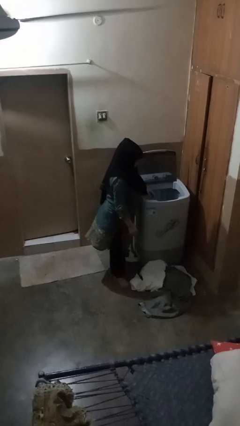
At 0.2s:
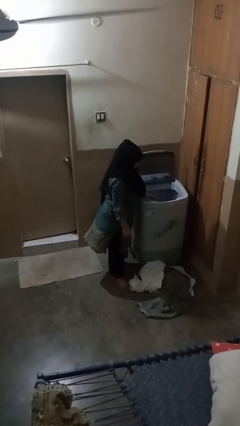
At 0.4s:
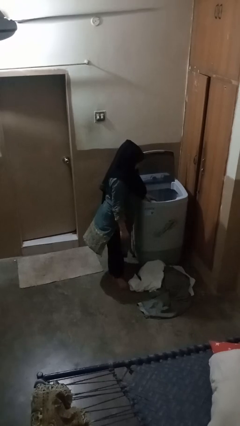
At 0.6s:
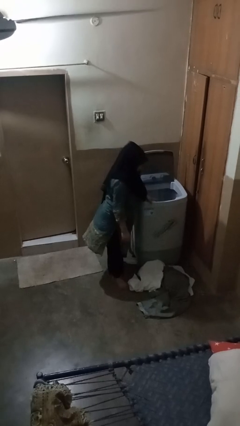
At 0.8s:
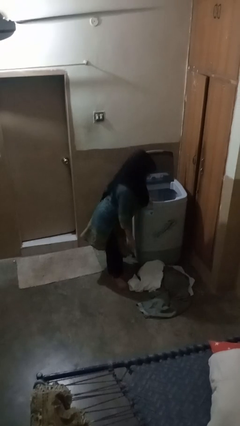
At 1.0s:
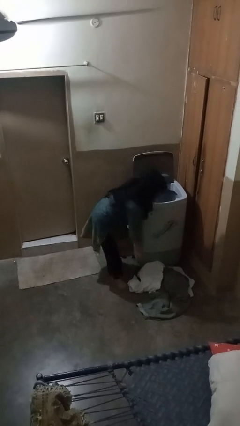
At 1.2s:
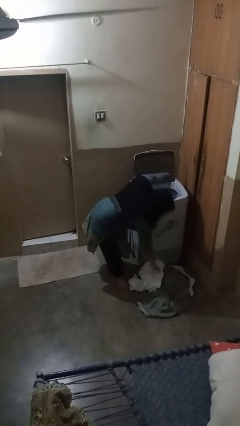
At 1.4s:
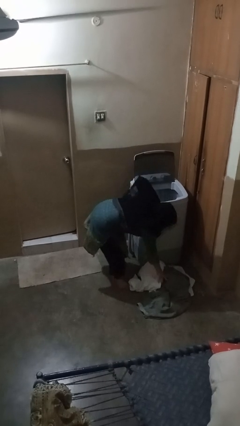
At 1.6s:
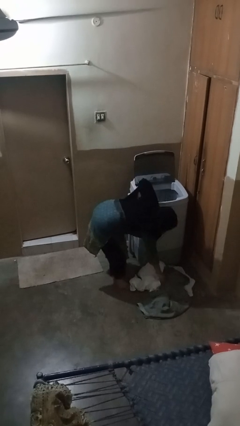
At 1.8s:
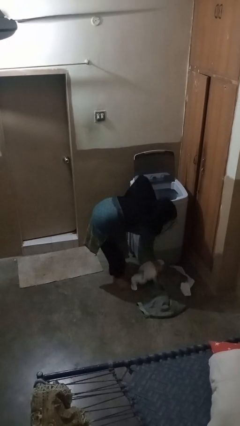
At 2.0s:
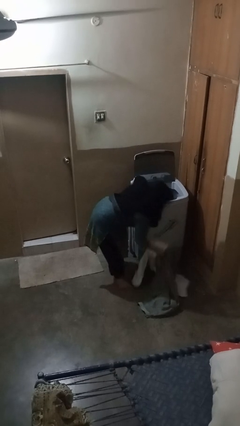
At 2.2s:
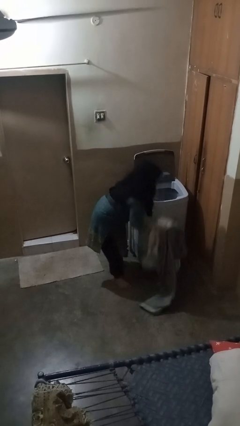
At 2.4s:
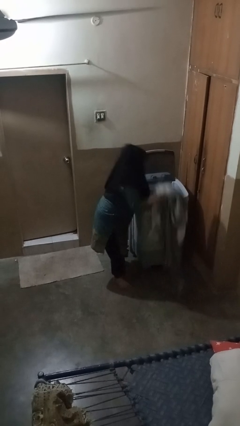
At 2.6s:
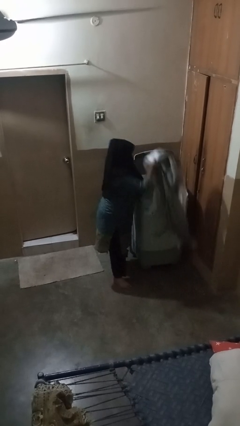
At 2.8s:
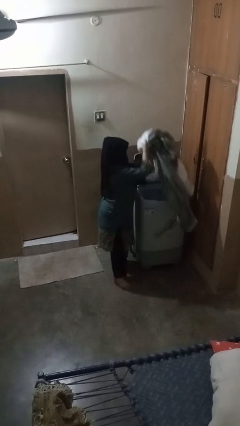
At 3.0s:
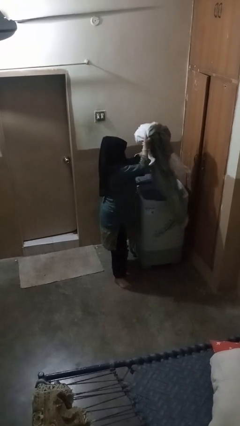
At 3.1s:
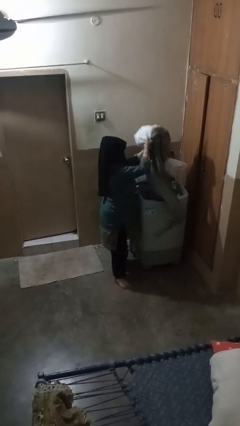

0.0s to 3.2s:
person loads clotheswasher

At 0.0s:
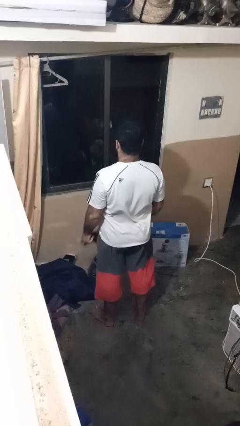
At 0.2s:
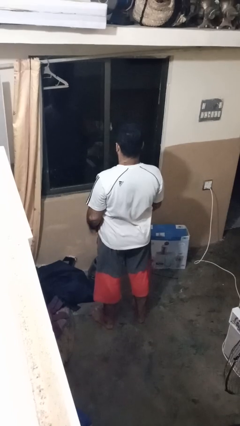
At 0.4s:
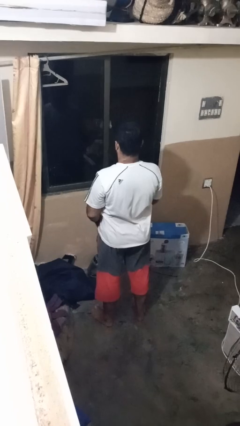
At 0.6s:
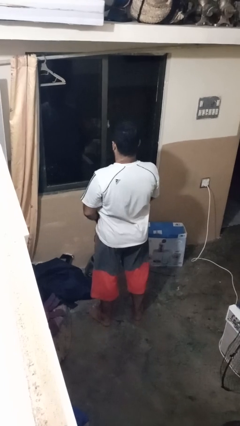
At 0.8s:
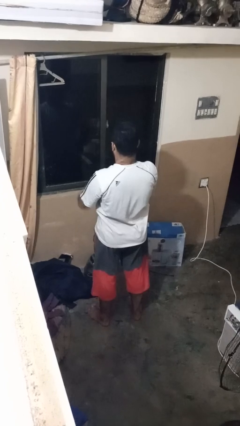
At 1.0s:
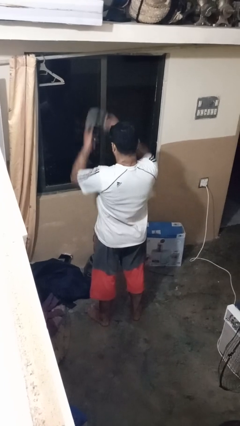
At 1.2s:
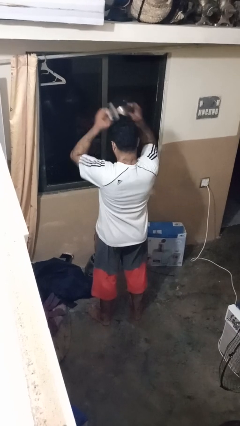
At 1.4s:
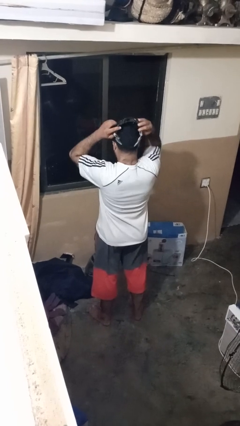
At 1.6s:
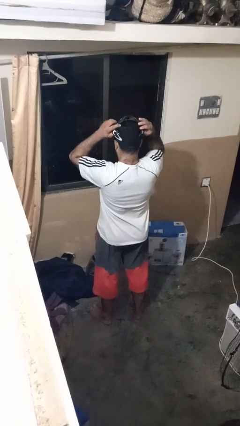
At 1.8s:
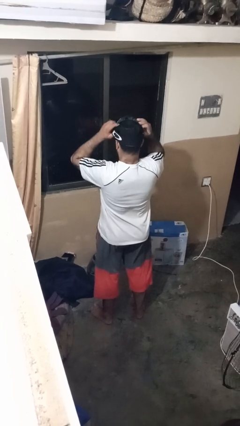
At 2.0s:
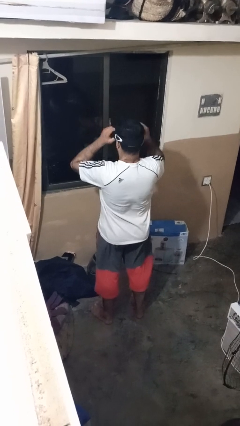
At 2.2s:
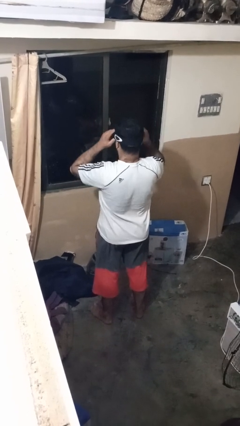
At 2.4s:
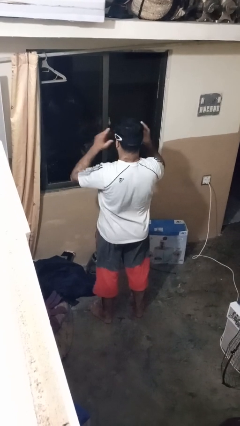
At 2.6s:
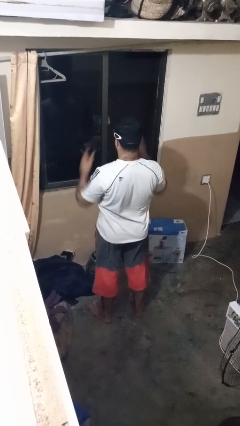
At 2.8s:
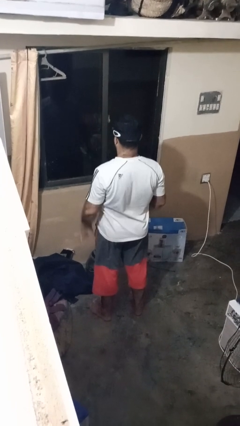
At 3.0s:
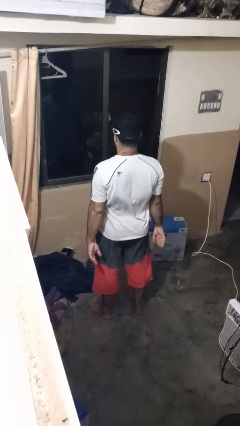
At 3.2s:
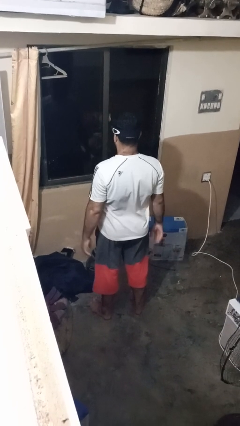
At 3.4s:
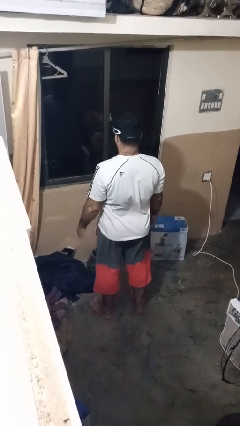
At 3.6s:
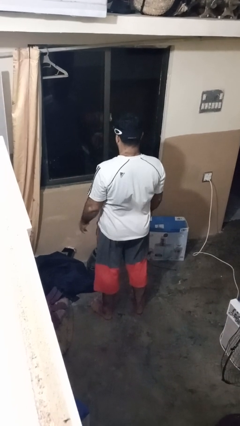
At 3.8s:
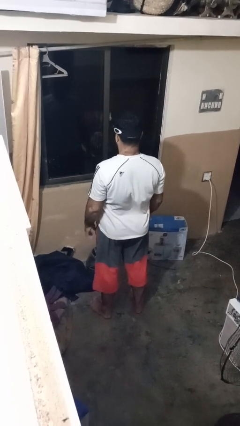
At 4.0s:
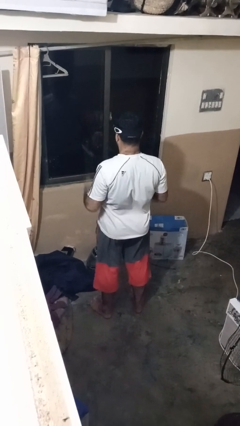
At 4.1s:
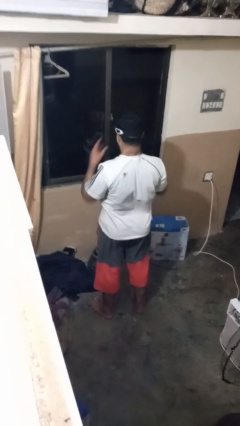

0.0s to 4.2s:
person puts on sunglasses

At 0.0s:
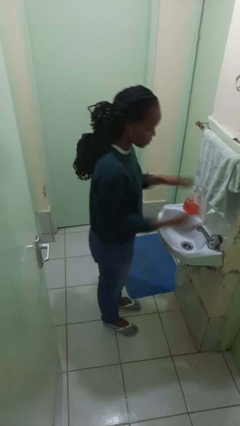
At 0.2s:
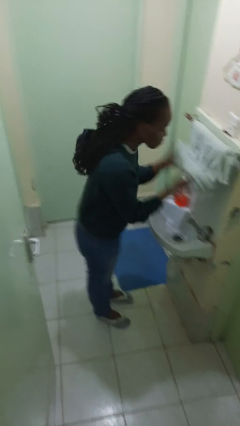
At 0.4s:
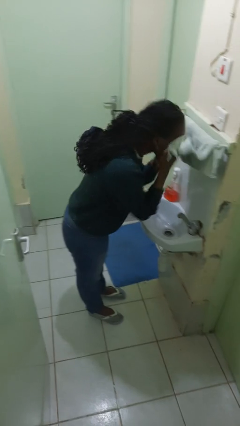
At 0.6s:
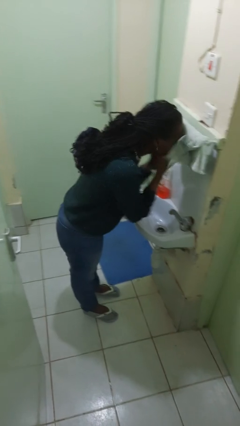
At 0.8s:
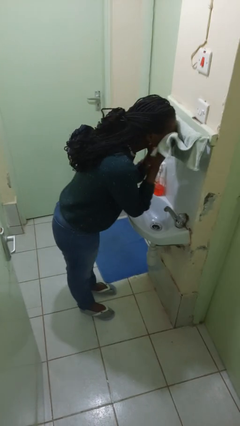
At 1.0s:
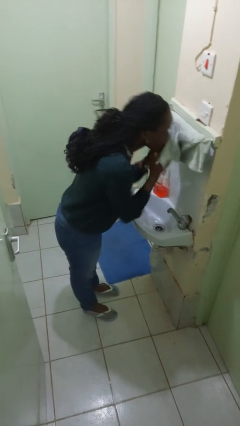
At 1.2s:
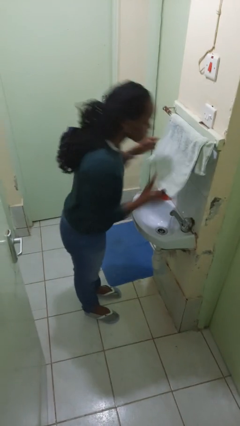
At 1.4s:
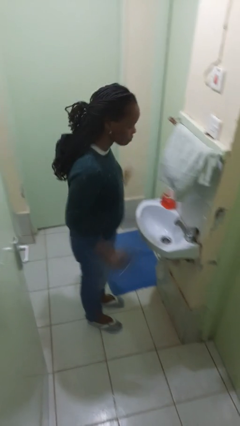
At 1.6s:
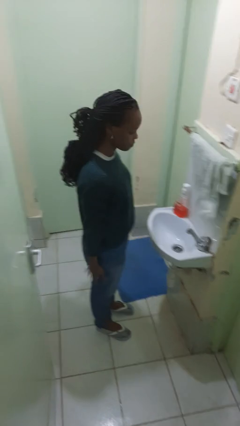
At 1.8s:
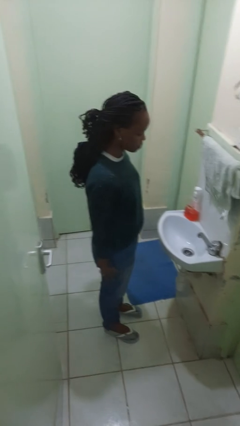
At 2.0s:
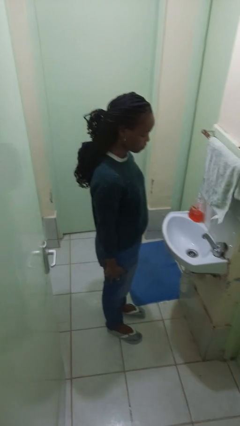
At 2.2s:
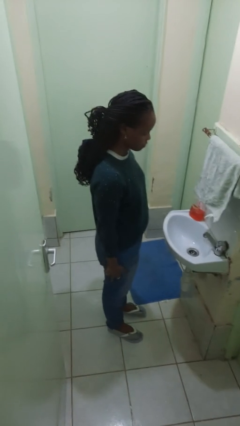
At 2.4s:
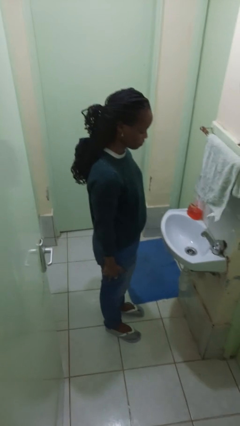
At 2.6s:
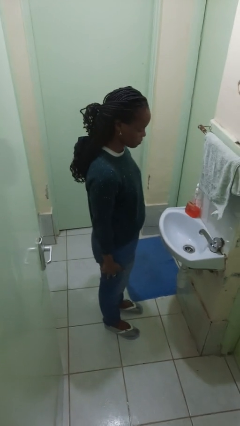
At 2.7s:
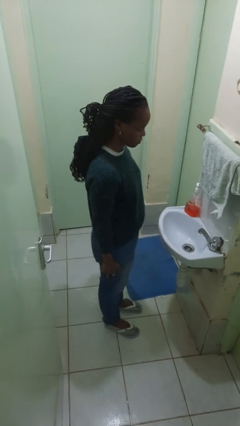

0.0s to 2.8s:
person dries face with towel

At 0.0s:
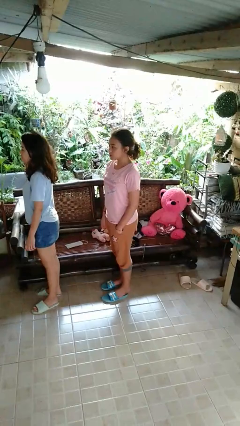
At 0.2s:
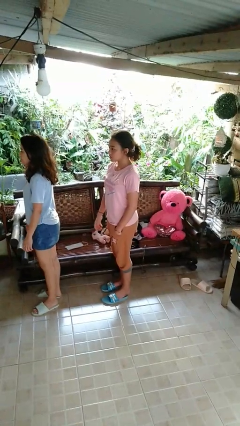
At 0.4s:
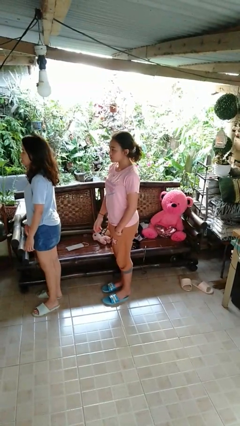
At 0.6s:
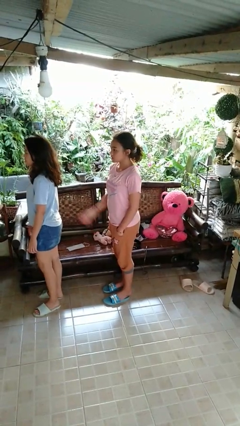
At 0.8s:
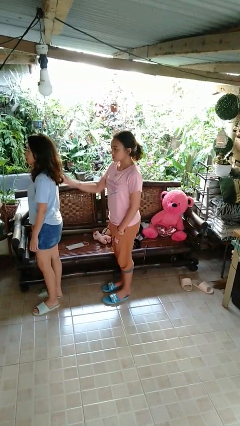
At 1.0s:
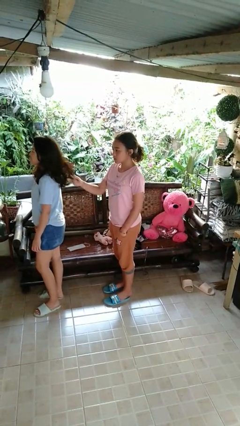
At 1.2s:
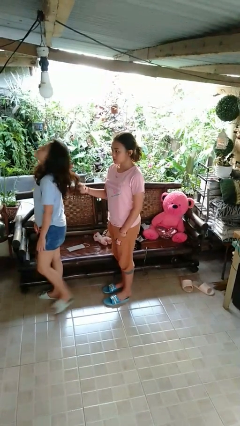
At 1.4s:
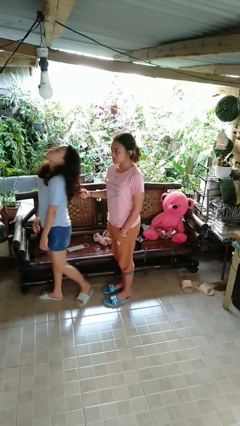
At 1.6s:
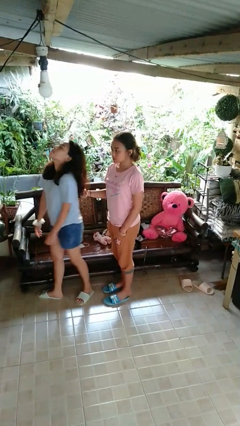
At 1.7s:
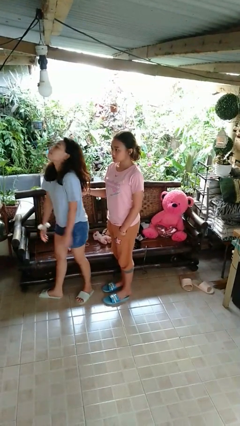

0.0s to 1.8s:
person grabs person by hair

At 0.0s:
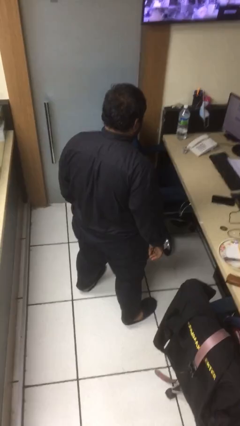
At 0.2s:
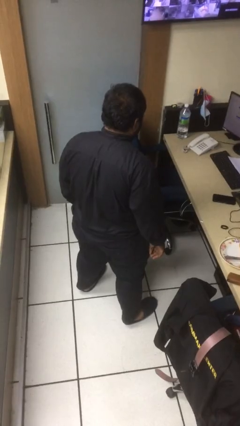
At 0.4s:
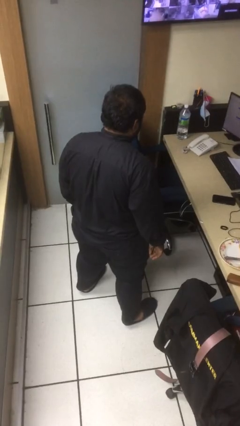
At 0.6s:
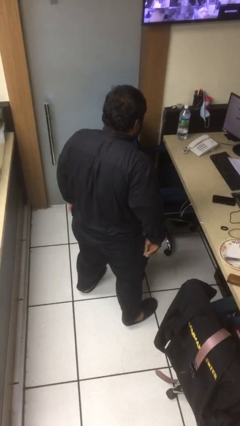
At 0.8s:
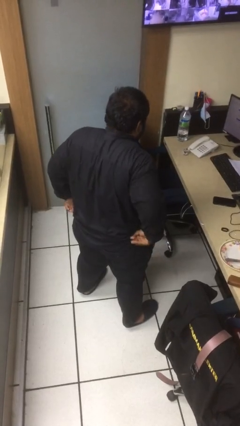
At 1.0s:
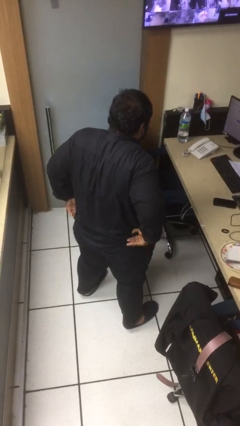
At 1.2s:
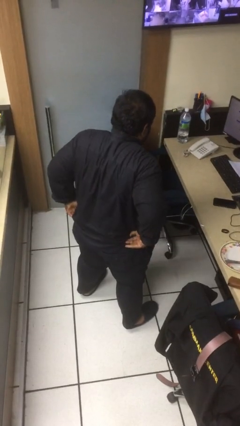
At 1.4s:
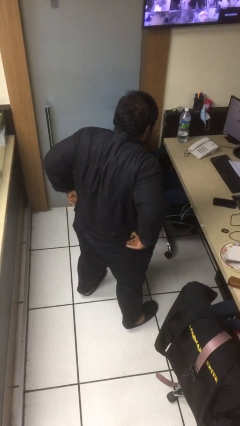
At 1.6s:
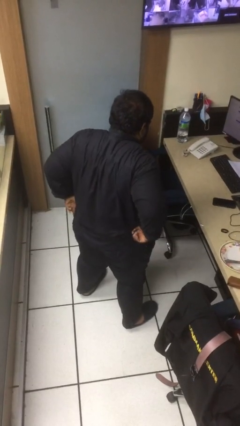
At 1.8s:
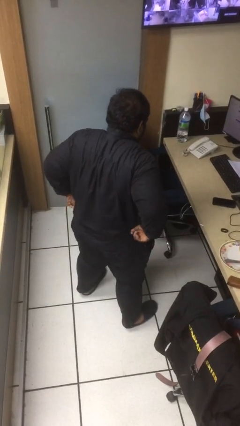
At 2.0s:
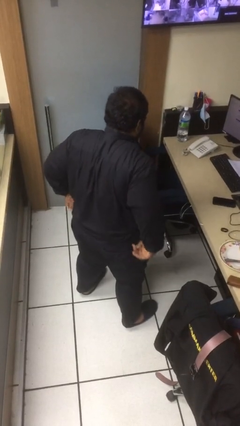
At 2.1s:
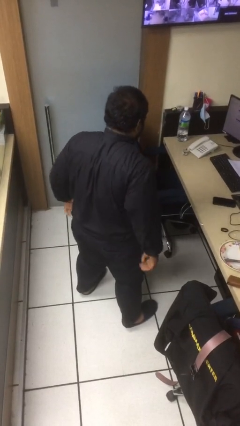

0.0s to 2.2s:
person hikes up pants

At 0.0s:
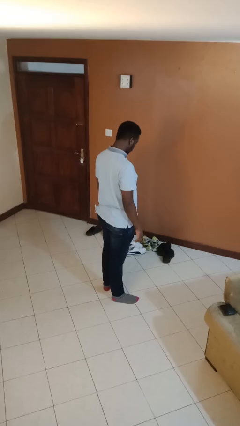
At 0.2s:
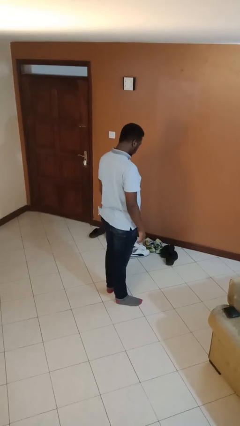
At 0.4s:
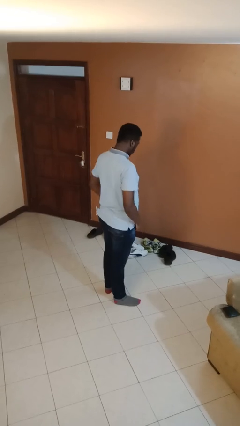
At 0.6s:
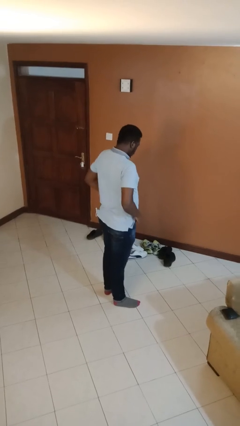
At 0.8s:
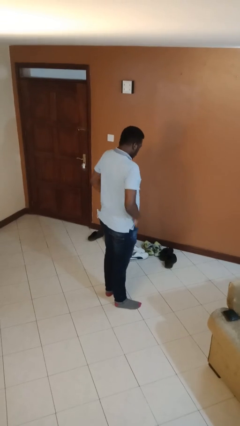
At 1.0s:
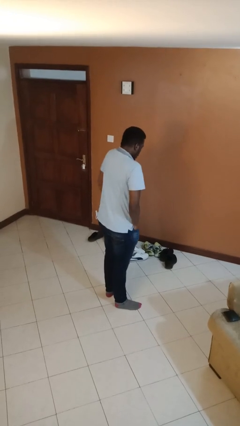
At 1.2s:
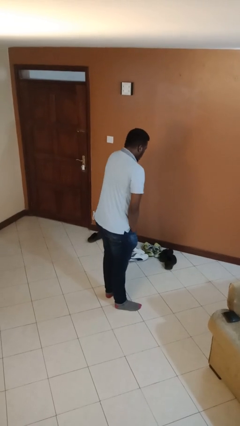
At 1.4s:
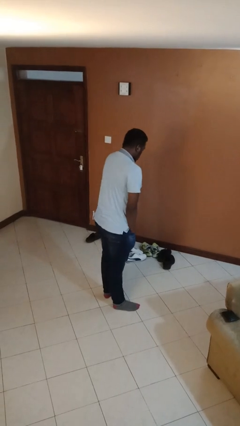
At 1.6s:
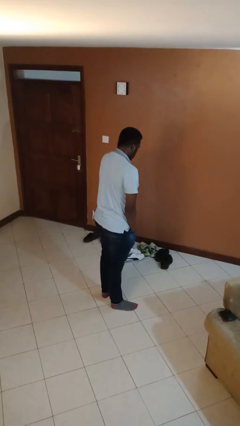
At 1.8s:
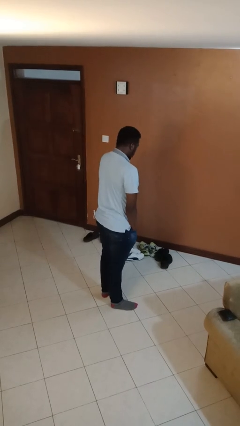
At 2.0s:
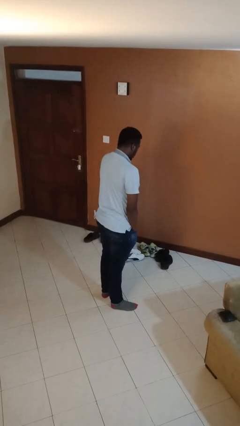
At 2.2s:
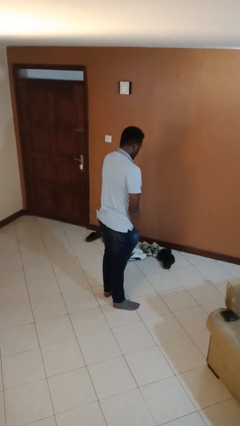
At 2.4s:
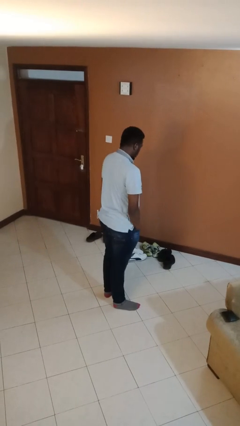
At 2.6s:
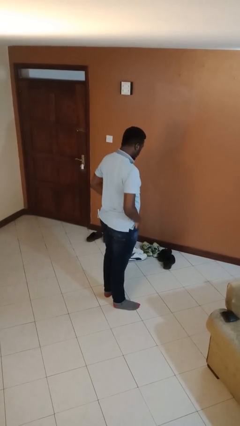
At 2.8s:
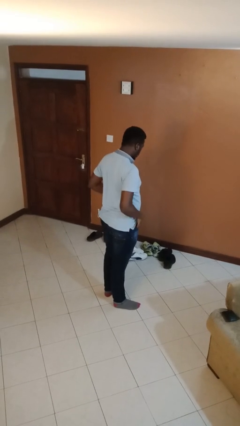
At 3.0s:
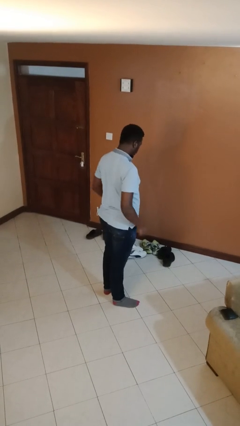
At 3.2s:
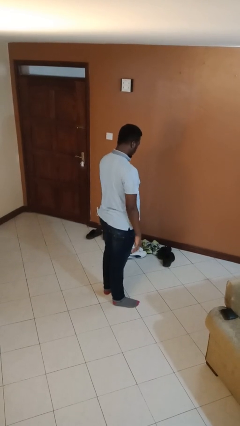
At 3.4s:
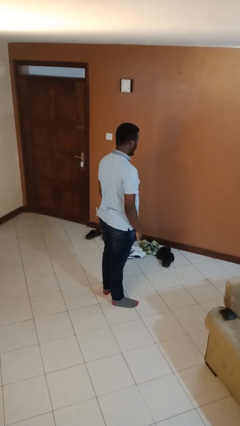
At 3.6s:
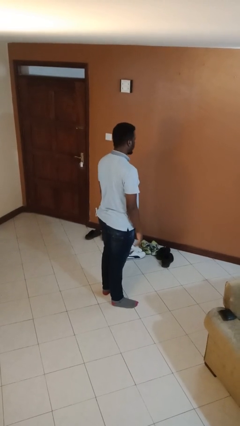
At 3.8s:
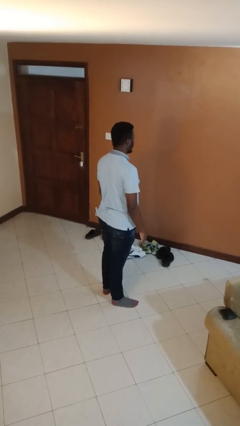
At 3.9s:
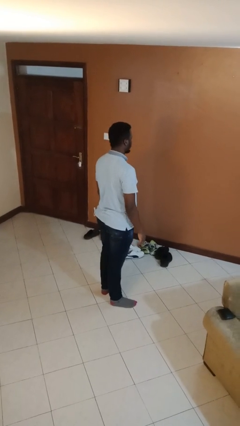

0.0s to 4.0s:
person puts hands in back pockets
